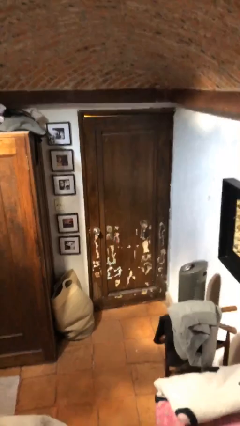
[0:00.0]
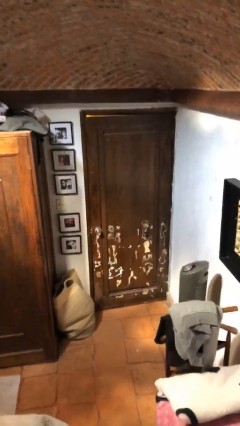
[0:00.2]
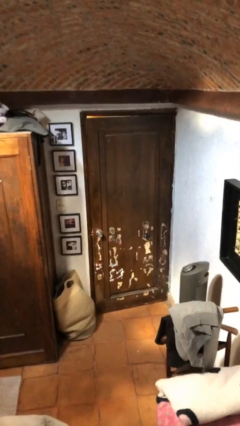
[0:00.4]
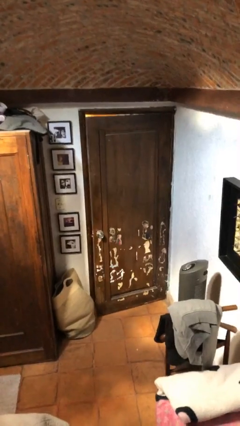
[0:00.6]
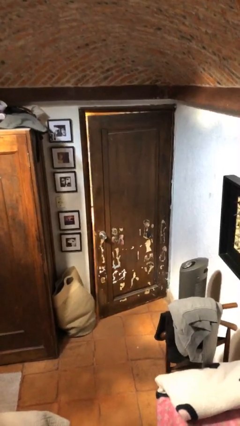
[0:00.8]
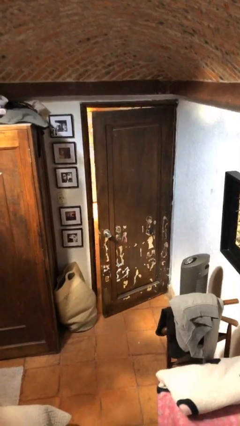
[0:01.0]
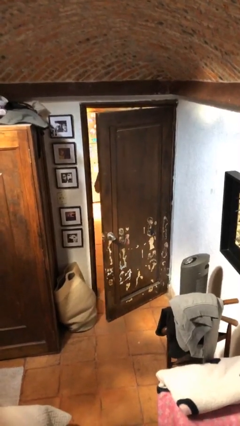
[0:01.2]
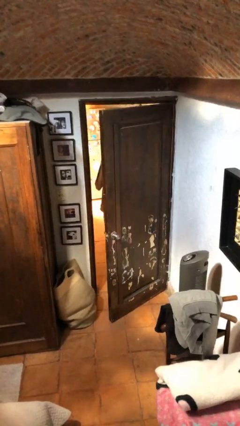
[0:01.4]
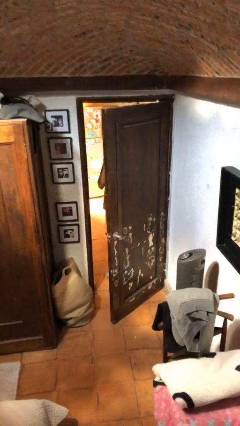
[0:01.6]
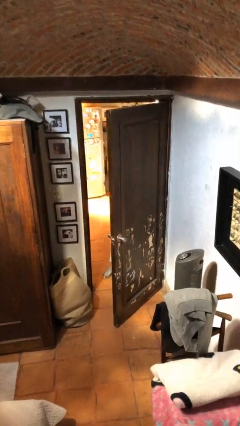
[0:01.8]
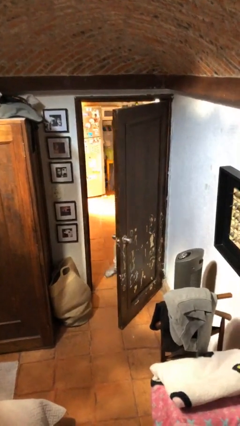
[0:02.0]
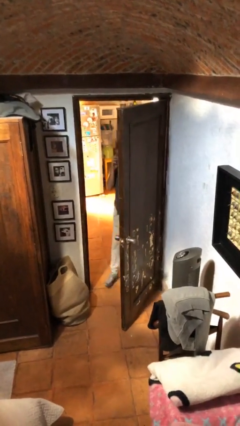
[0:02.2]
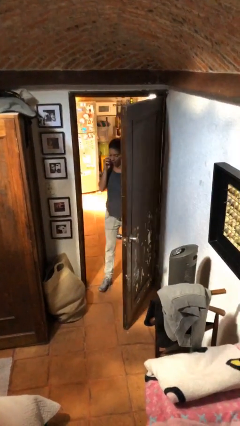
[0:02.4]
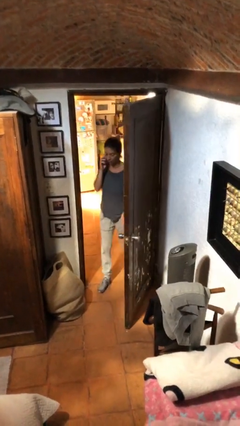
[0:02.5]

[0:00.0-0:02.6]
person opens facility door

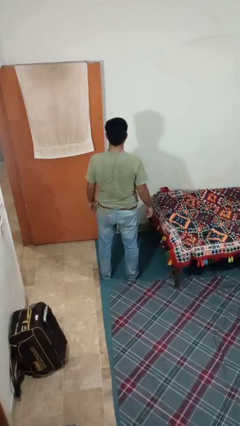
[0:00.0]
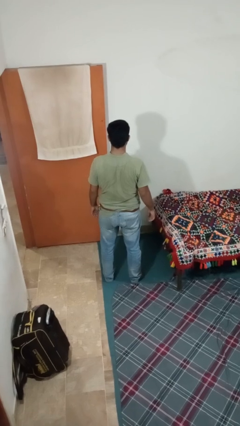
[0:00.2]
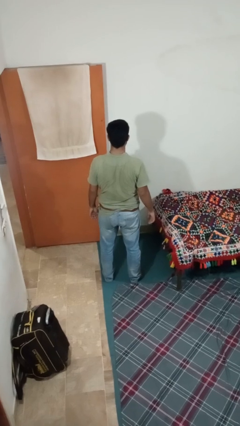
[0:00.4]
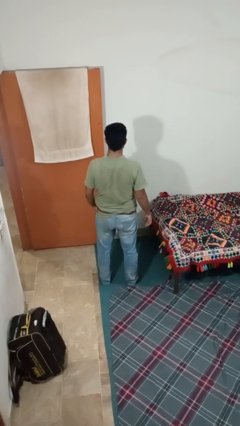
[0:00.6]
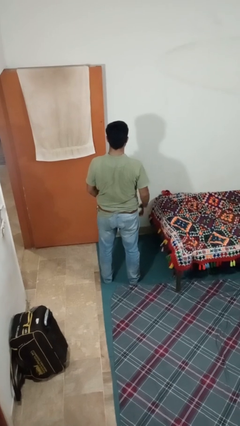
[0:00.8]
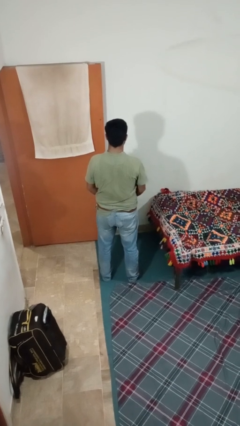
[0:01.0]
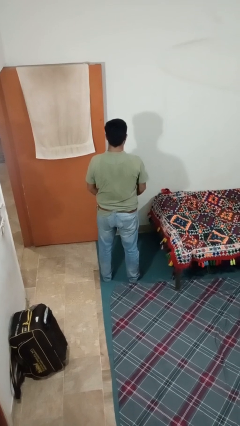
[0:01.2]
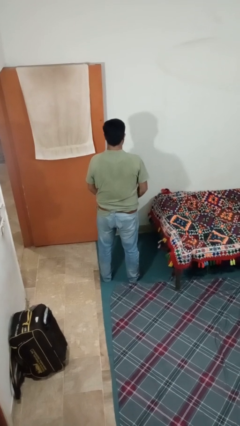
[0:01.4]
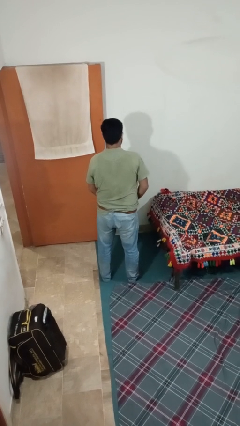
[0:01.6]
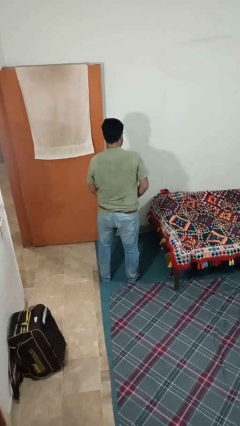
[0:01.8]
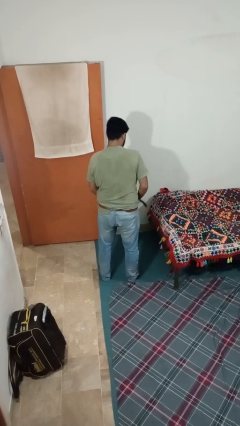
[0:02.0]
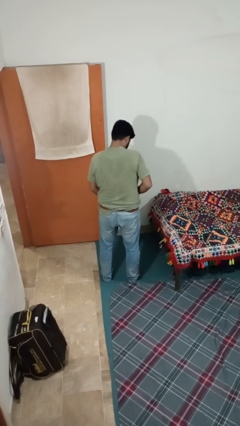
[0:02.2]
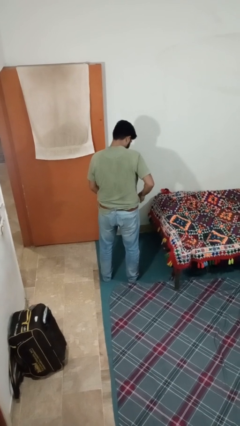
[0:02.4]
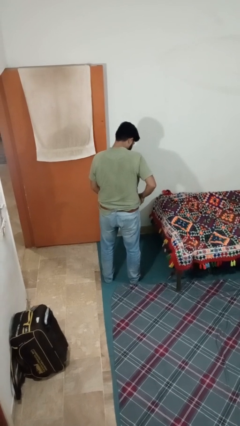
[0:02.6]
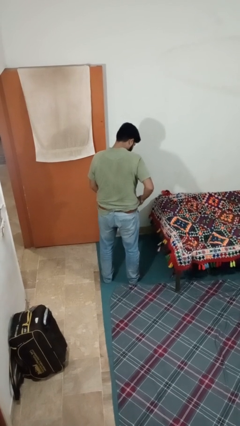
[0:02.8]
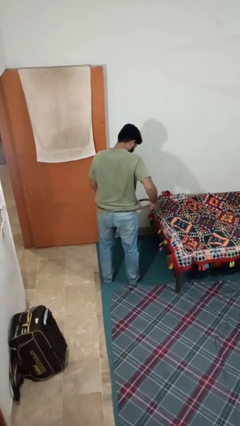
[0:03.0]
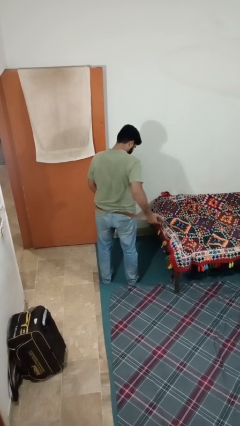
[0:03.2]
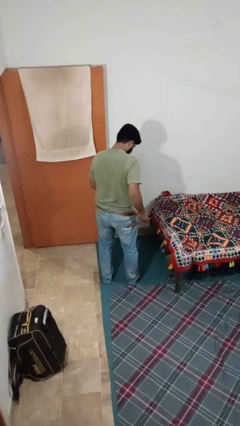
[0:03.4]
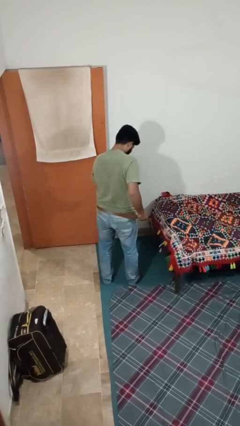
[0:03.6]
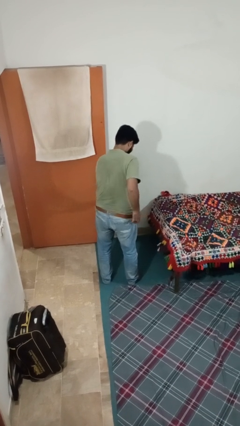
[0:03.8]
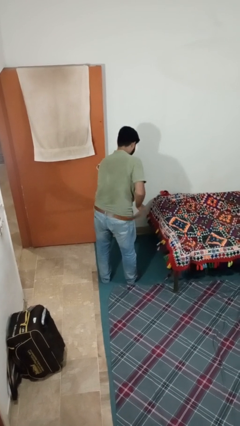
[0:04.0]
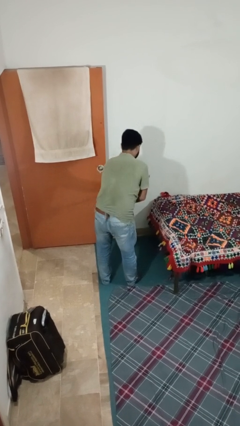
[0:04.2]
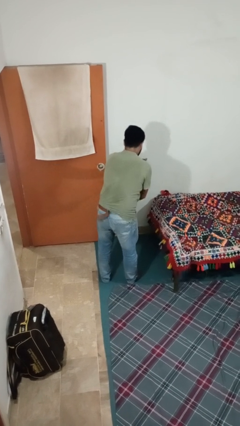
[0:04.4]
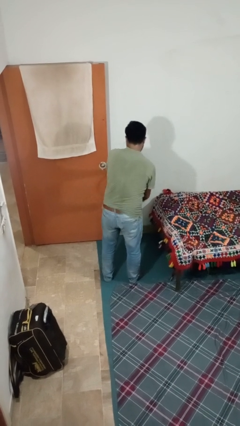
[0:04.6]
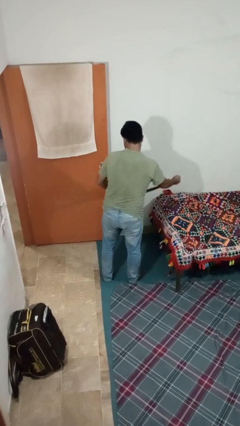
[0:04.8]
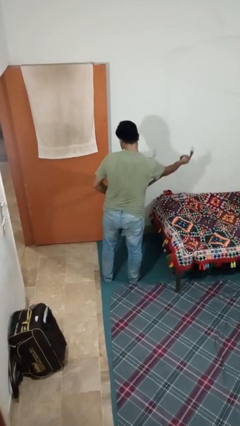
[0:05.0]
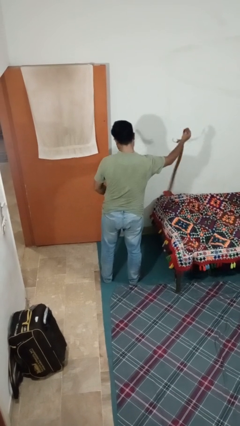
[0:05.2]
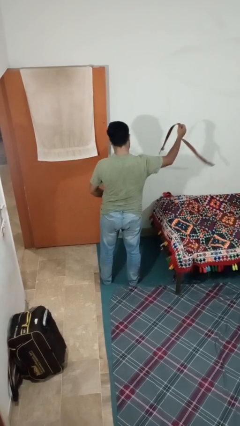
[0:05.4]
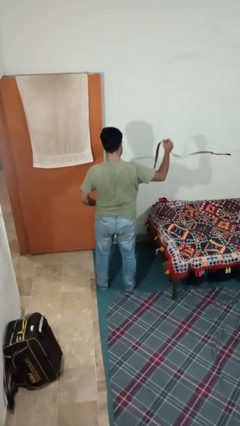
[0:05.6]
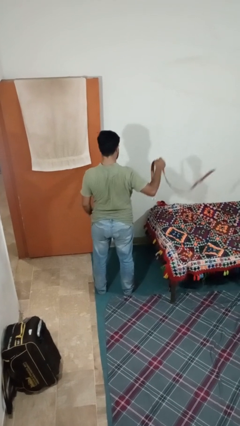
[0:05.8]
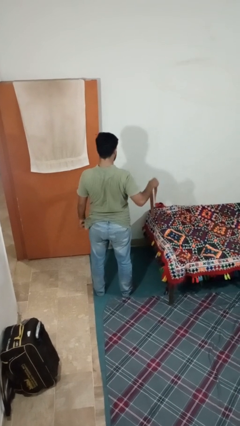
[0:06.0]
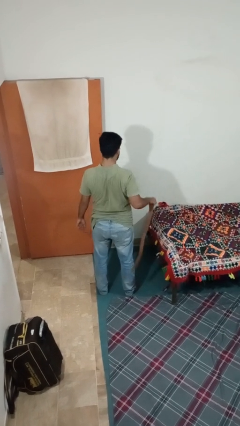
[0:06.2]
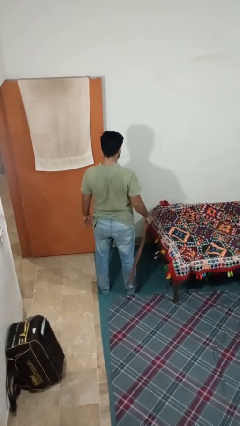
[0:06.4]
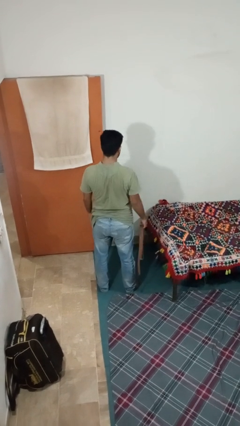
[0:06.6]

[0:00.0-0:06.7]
person takes off belt

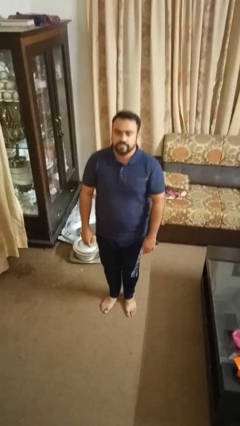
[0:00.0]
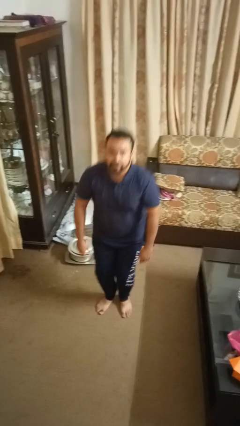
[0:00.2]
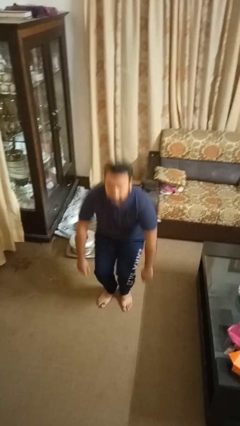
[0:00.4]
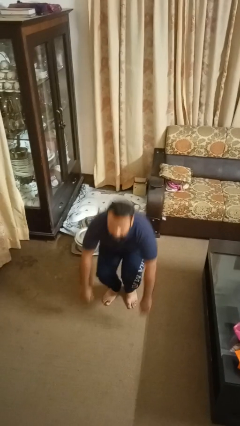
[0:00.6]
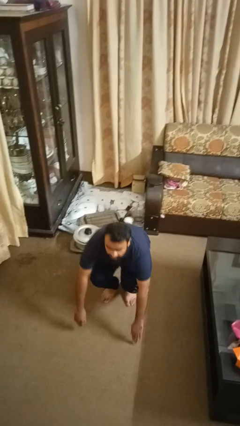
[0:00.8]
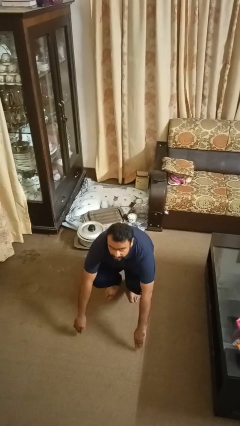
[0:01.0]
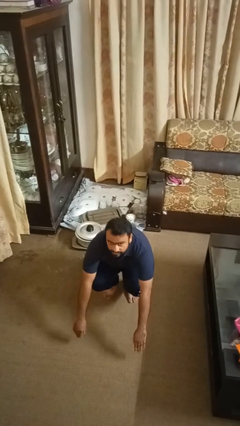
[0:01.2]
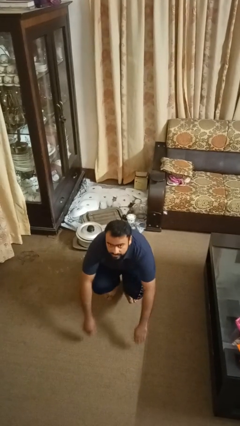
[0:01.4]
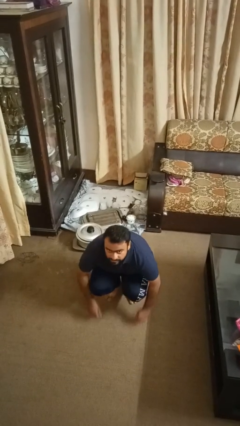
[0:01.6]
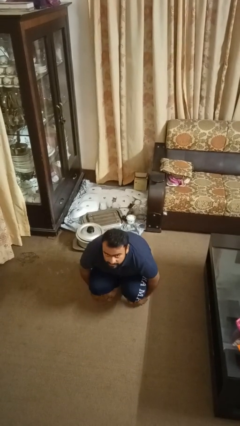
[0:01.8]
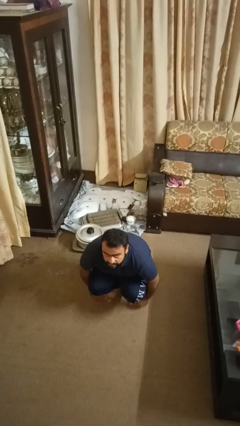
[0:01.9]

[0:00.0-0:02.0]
person squats

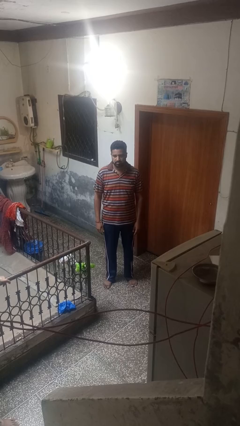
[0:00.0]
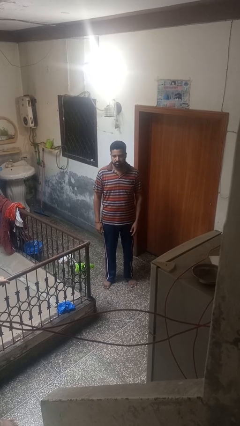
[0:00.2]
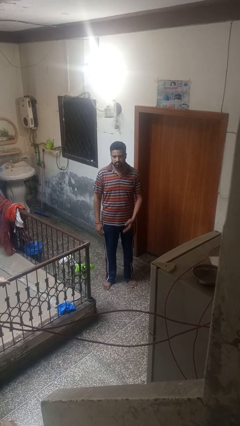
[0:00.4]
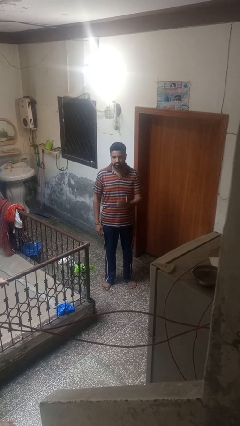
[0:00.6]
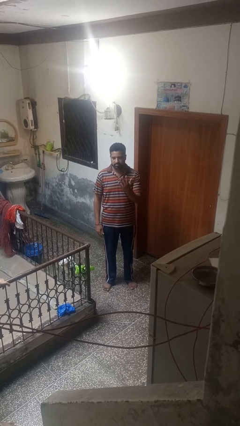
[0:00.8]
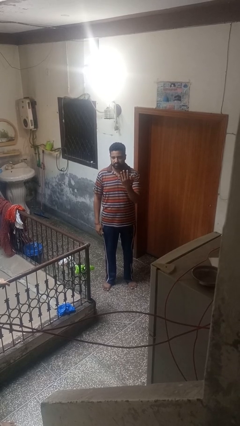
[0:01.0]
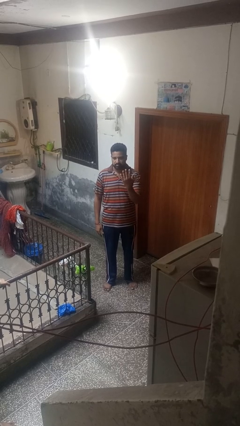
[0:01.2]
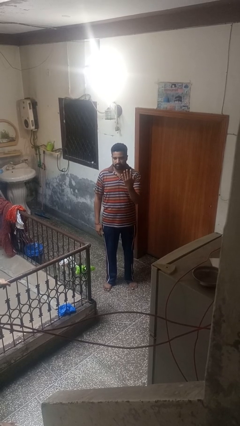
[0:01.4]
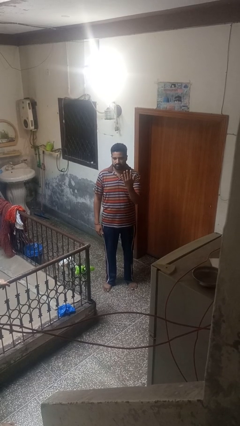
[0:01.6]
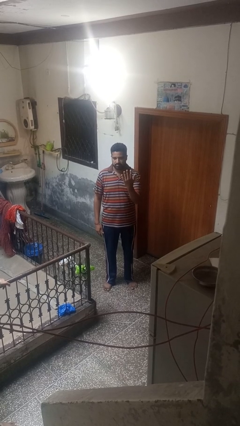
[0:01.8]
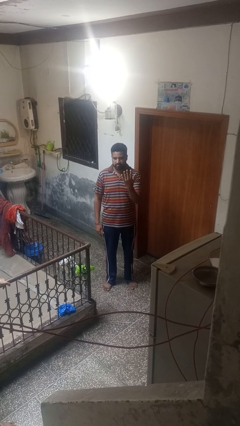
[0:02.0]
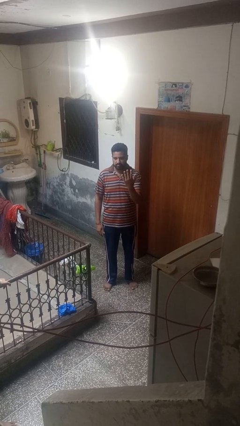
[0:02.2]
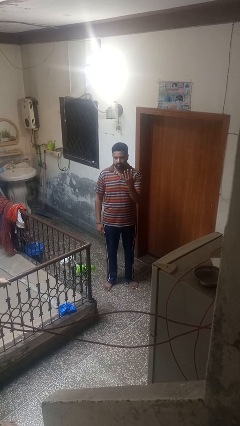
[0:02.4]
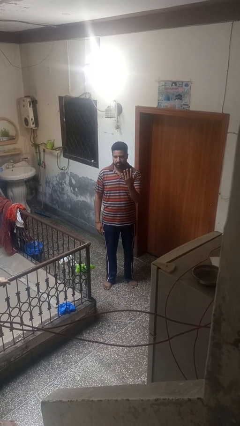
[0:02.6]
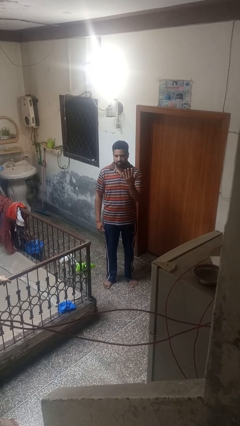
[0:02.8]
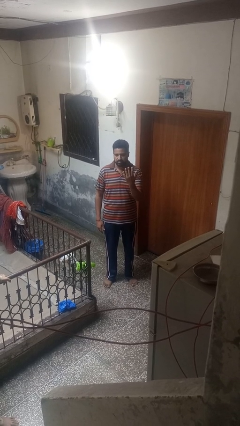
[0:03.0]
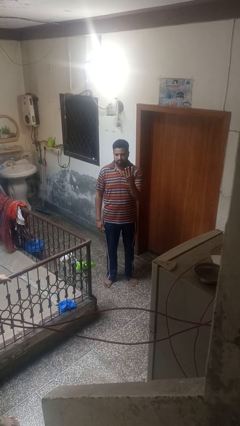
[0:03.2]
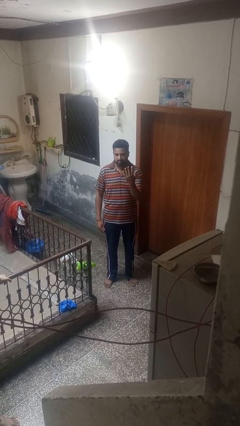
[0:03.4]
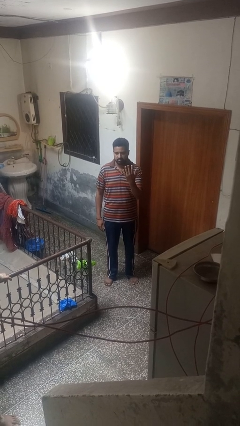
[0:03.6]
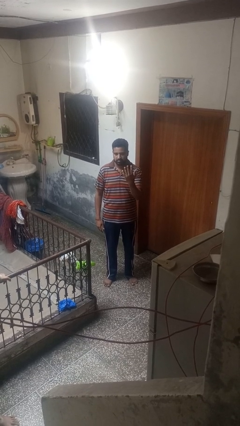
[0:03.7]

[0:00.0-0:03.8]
person gestures number five

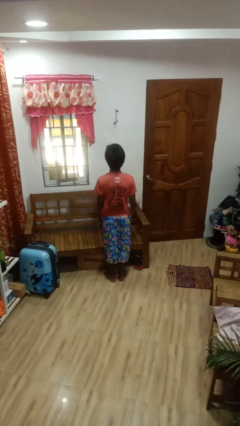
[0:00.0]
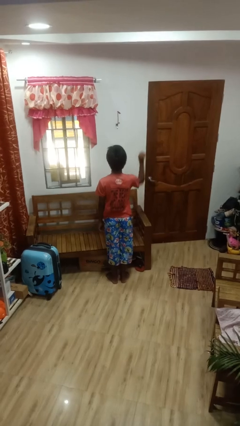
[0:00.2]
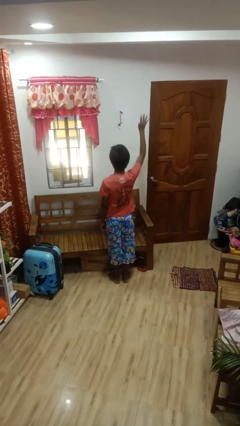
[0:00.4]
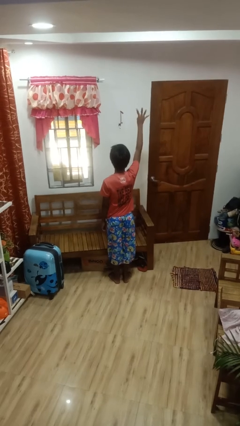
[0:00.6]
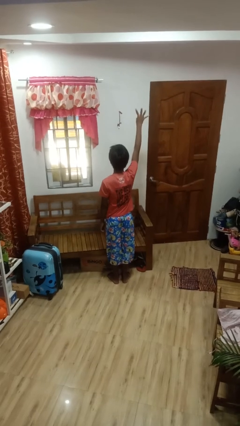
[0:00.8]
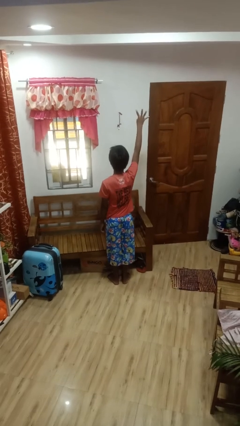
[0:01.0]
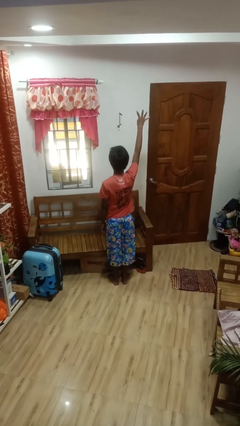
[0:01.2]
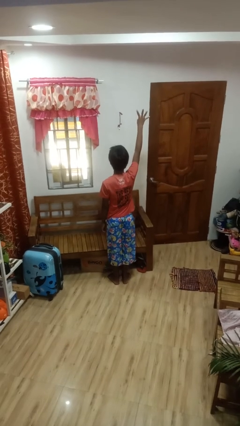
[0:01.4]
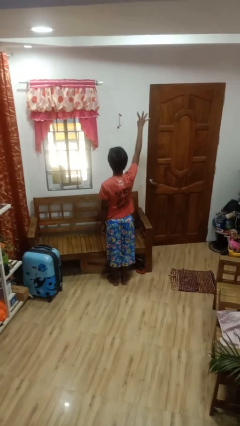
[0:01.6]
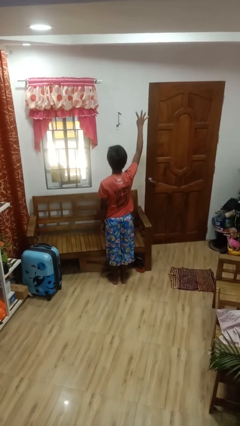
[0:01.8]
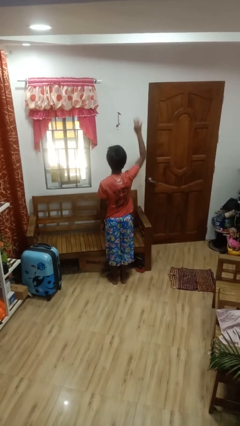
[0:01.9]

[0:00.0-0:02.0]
person gestures number four

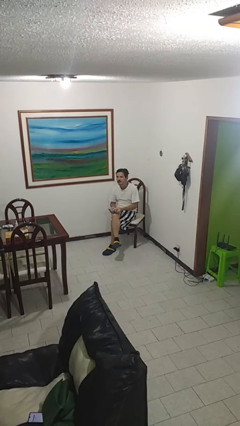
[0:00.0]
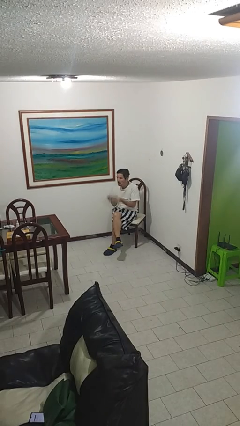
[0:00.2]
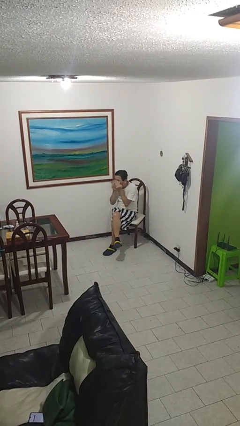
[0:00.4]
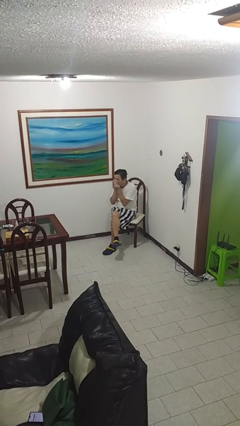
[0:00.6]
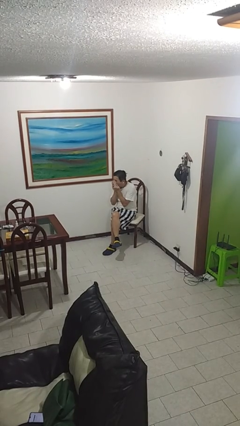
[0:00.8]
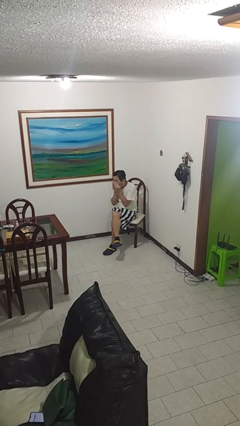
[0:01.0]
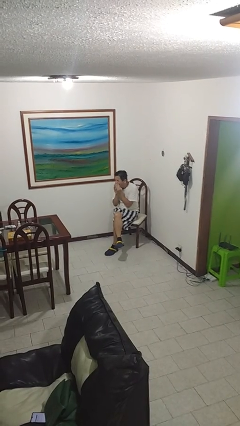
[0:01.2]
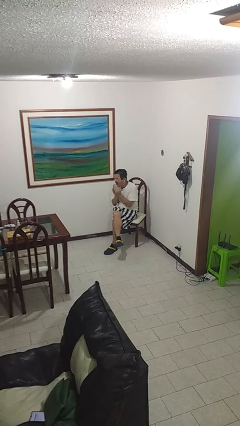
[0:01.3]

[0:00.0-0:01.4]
person blows nose
